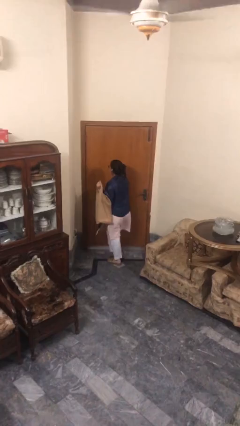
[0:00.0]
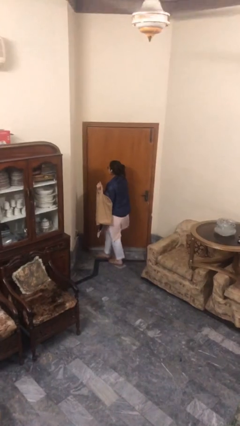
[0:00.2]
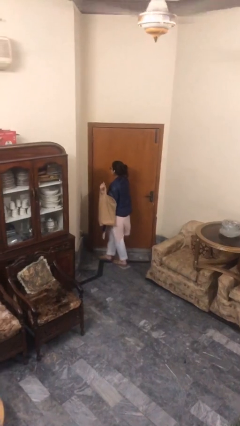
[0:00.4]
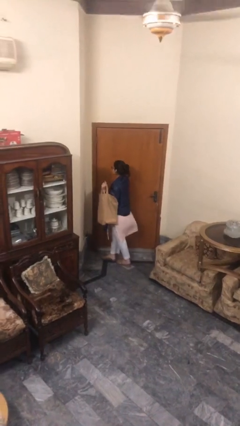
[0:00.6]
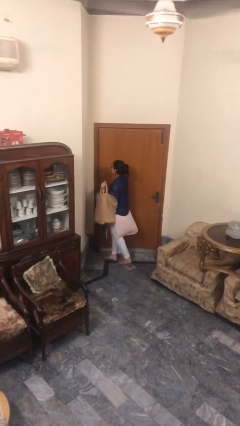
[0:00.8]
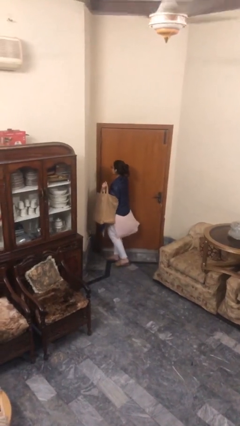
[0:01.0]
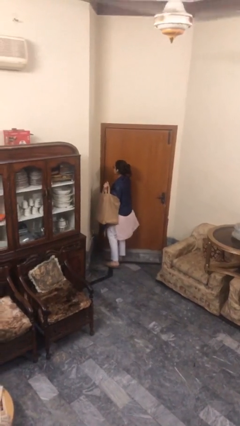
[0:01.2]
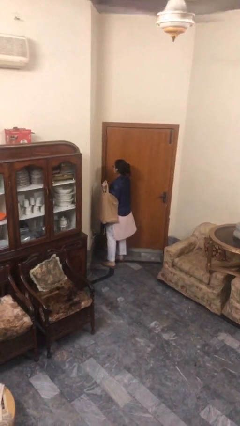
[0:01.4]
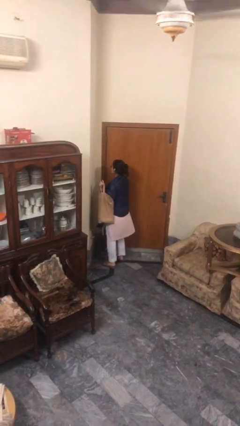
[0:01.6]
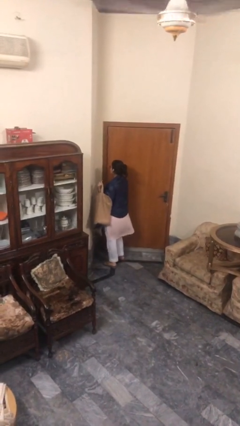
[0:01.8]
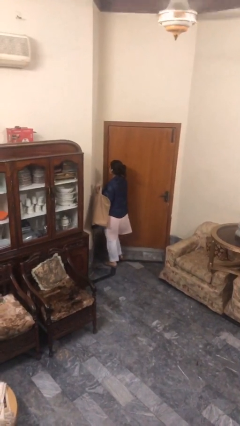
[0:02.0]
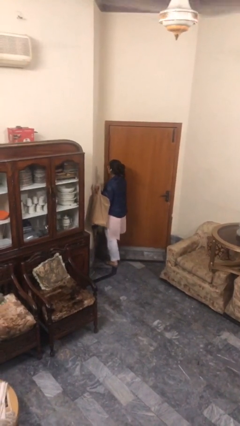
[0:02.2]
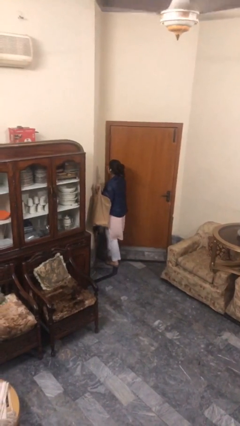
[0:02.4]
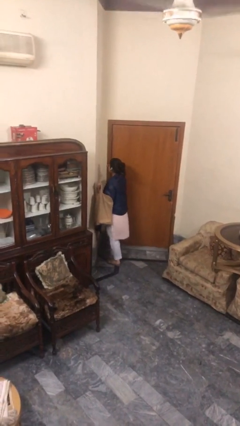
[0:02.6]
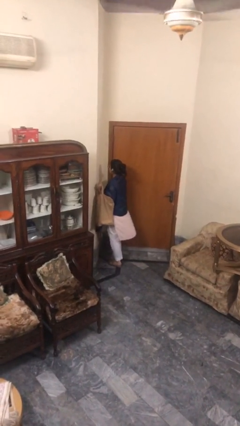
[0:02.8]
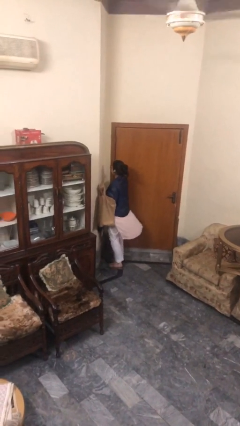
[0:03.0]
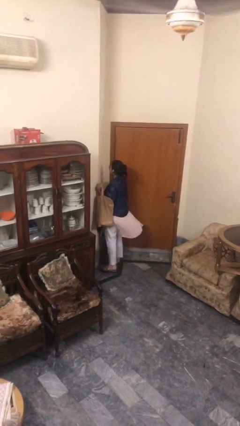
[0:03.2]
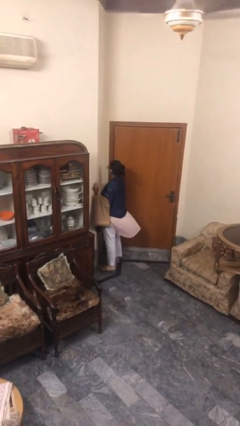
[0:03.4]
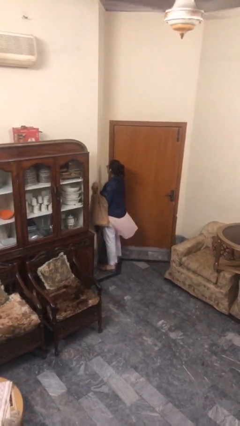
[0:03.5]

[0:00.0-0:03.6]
person carries groceries

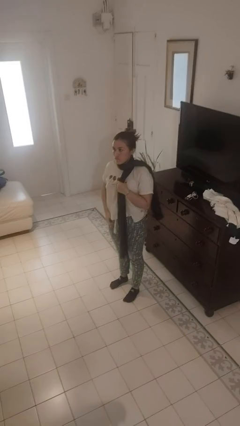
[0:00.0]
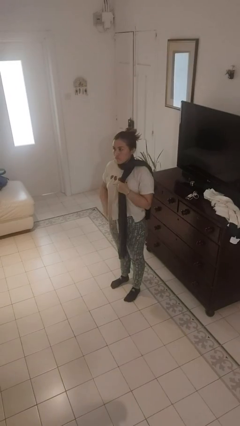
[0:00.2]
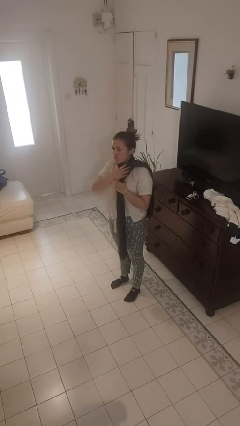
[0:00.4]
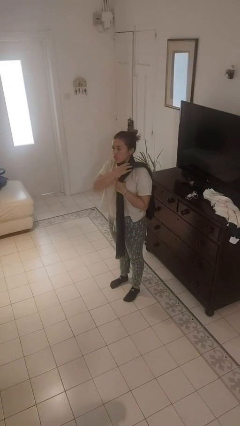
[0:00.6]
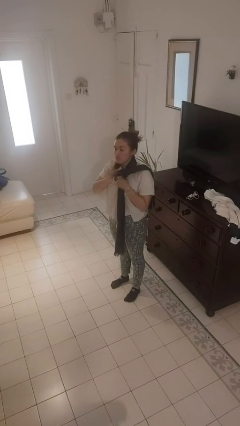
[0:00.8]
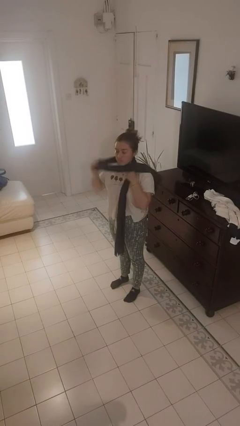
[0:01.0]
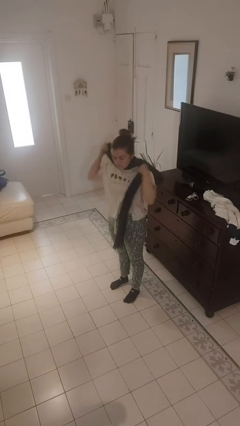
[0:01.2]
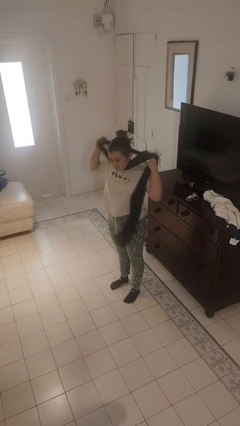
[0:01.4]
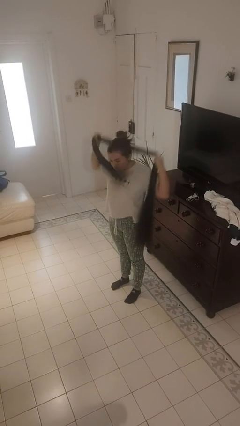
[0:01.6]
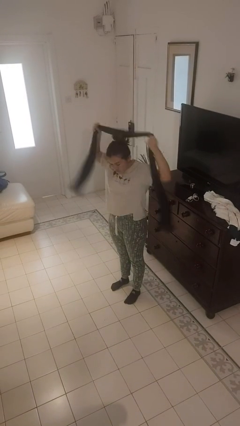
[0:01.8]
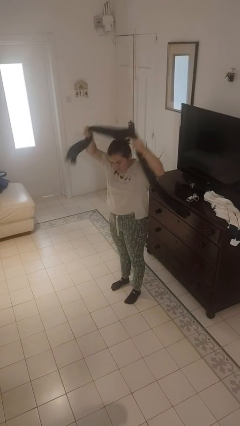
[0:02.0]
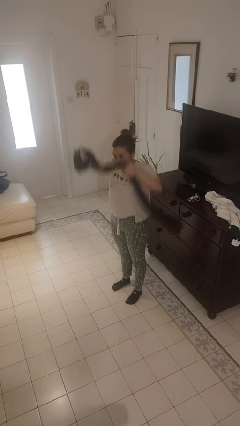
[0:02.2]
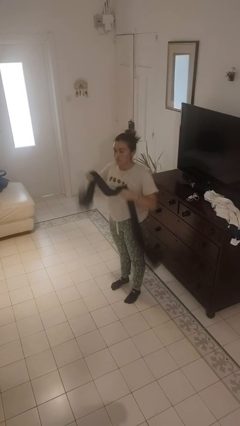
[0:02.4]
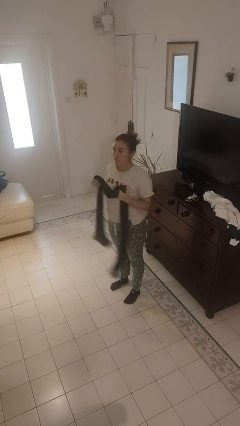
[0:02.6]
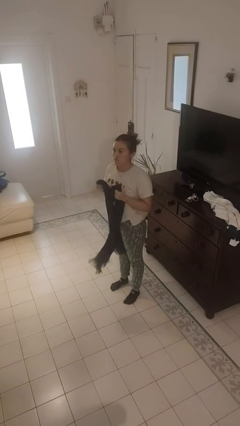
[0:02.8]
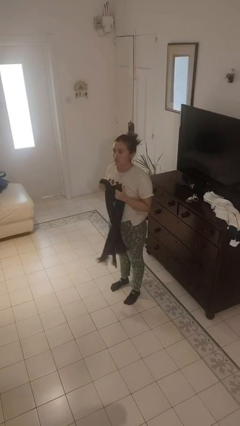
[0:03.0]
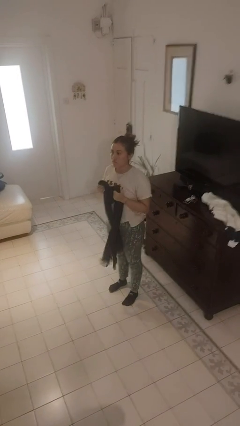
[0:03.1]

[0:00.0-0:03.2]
person takes off scarf

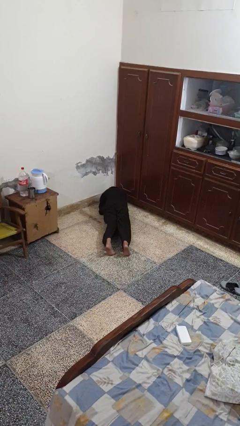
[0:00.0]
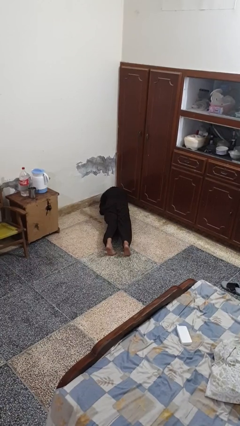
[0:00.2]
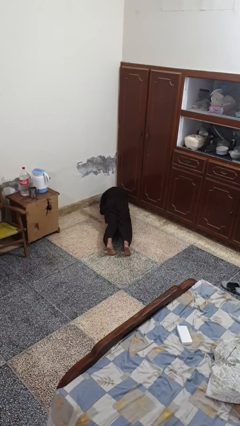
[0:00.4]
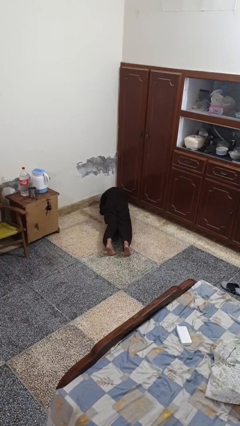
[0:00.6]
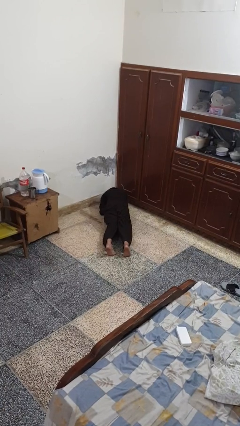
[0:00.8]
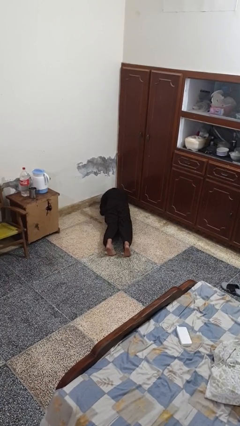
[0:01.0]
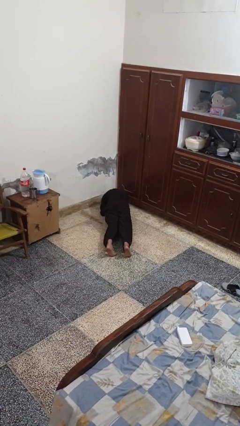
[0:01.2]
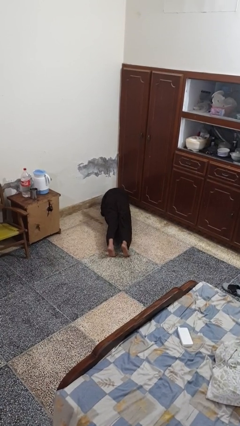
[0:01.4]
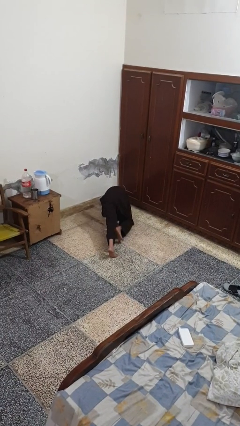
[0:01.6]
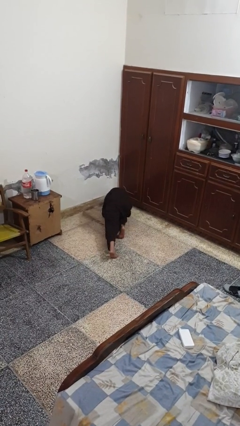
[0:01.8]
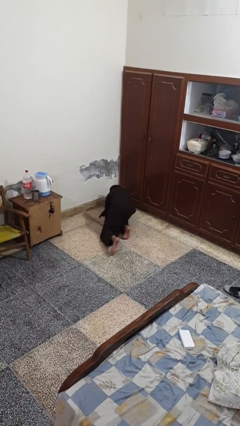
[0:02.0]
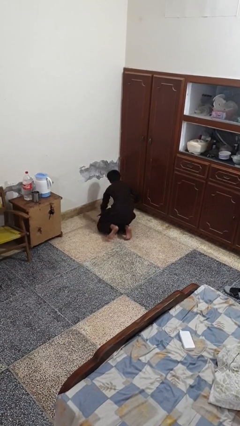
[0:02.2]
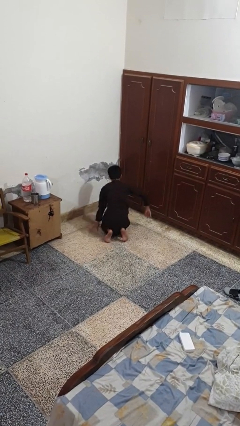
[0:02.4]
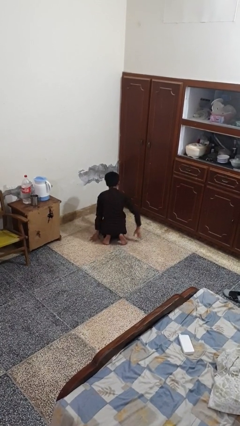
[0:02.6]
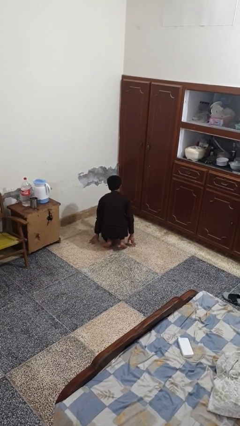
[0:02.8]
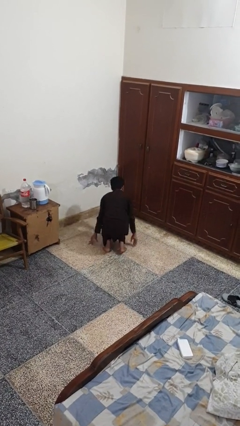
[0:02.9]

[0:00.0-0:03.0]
person stands up from floor

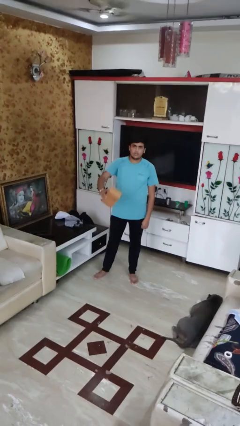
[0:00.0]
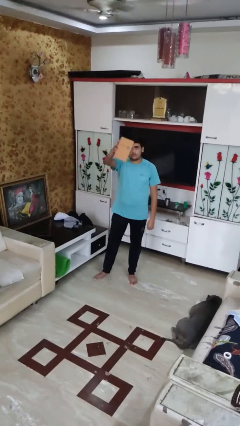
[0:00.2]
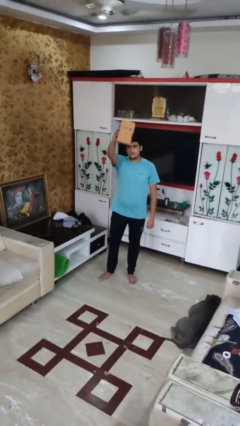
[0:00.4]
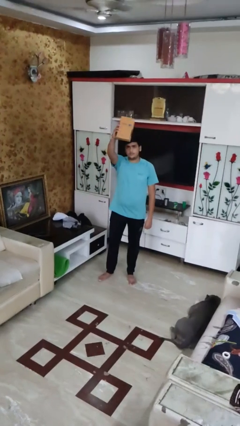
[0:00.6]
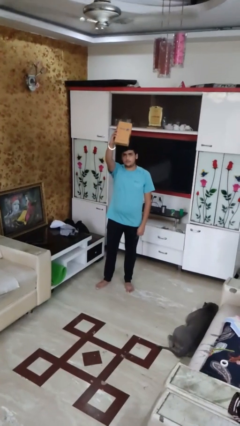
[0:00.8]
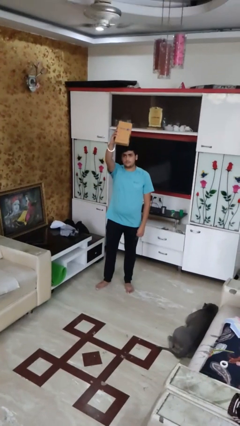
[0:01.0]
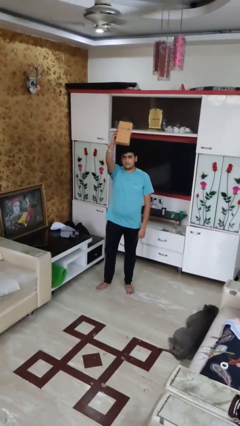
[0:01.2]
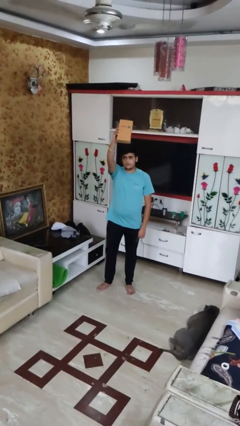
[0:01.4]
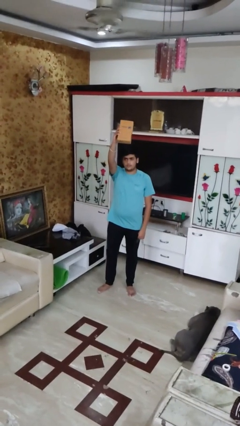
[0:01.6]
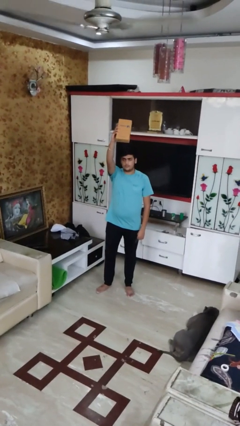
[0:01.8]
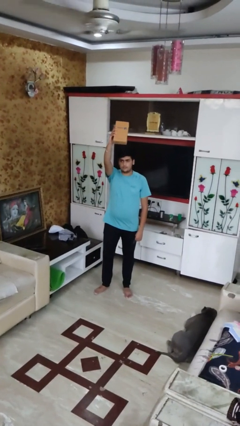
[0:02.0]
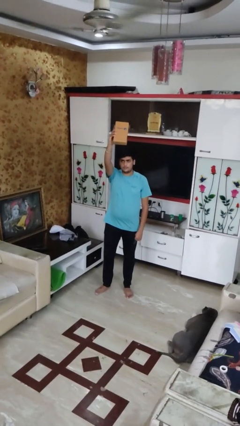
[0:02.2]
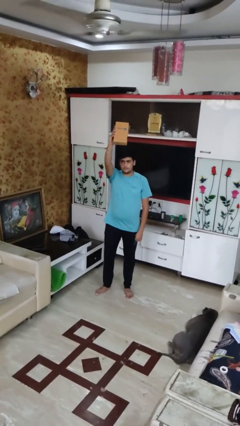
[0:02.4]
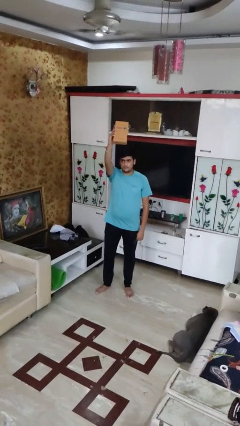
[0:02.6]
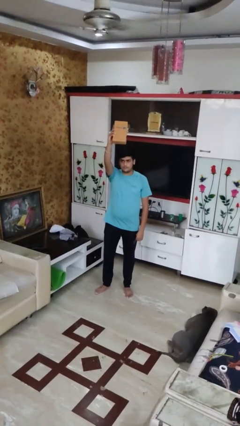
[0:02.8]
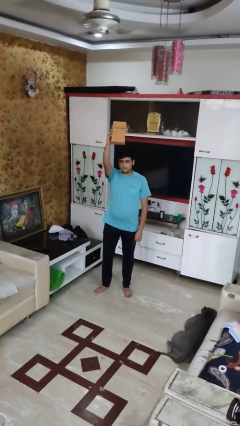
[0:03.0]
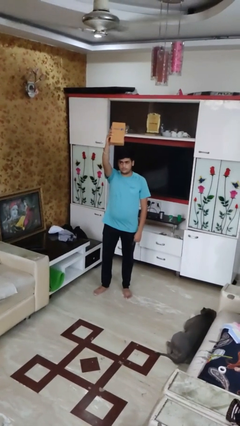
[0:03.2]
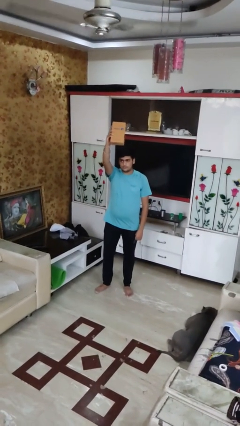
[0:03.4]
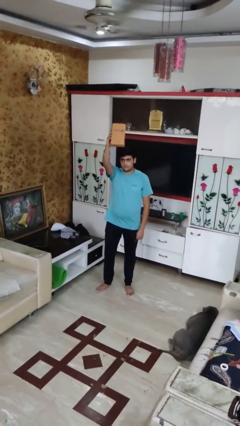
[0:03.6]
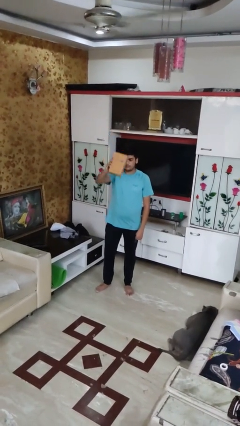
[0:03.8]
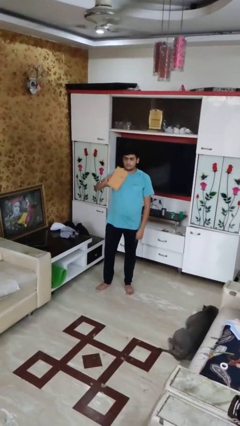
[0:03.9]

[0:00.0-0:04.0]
person holds object above head

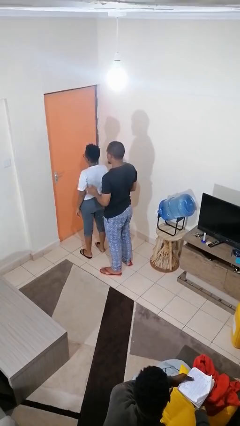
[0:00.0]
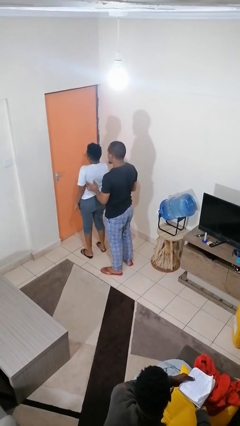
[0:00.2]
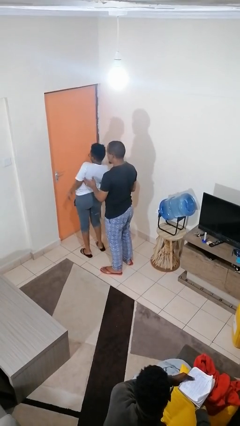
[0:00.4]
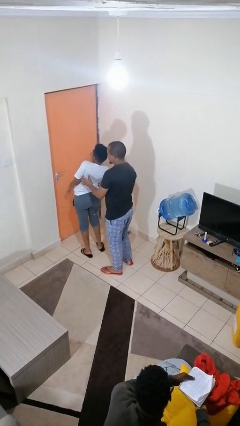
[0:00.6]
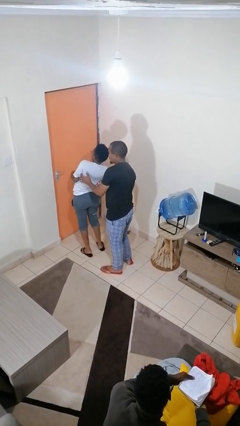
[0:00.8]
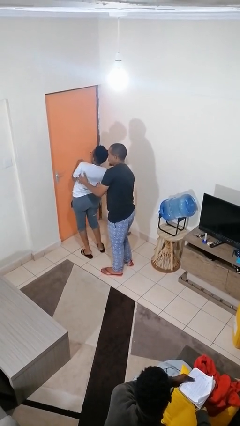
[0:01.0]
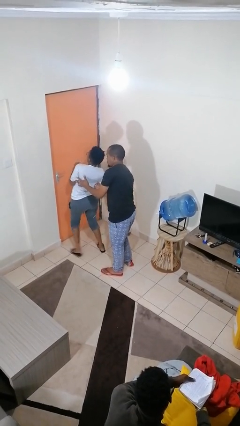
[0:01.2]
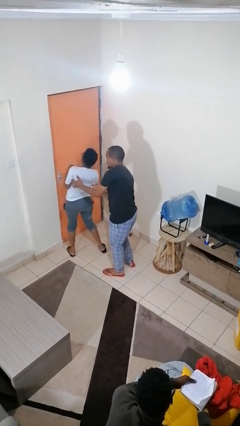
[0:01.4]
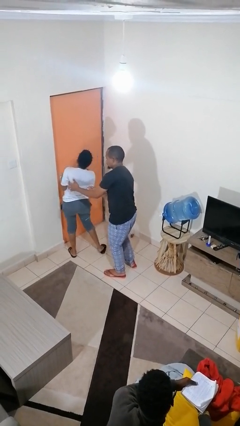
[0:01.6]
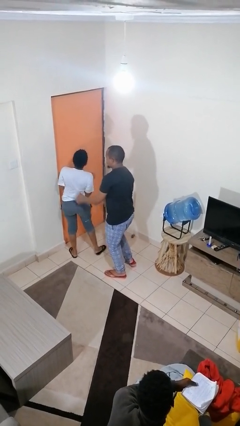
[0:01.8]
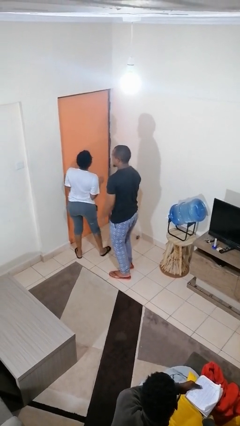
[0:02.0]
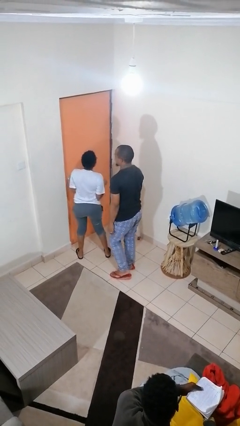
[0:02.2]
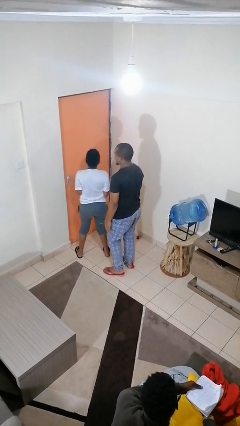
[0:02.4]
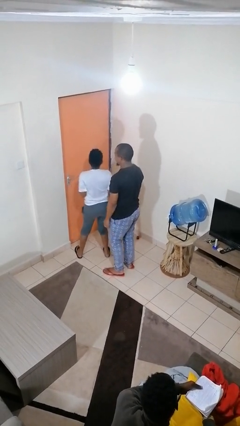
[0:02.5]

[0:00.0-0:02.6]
person tickles person

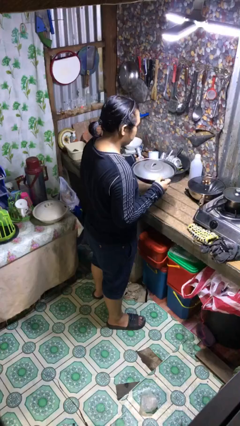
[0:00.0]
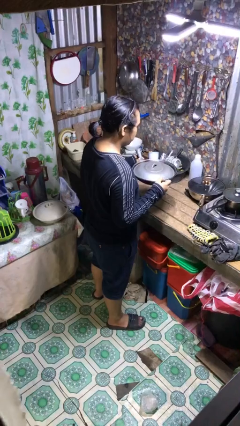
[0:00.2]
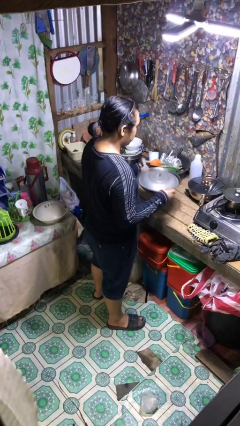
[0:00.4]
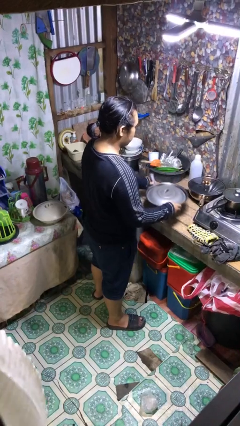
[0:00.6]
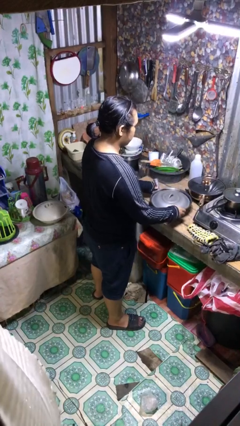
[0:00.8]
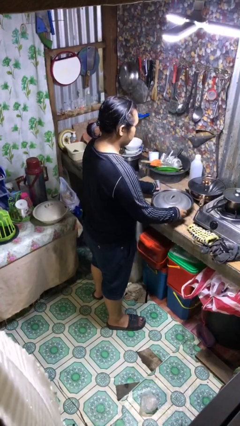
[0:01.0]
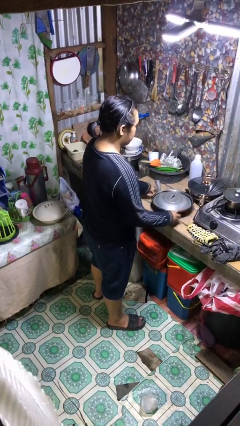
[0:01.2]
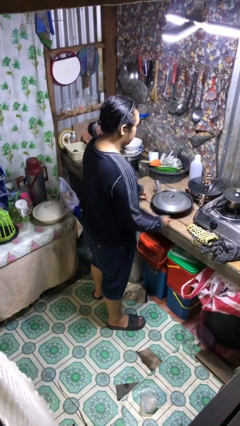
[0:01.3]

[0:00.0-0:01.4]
person puts down object on countertop
